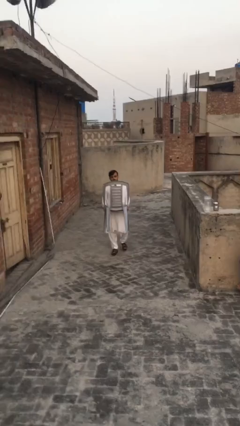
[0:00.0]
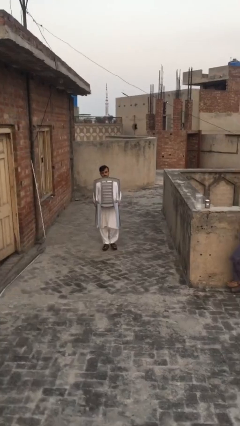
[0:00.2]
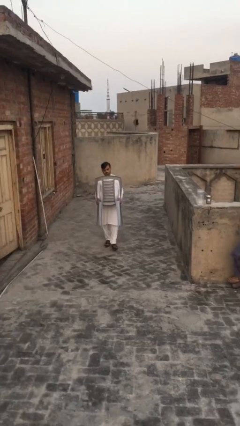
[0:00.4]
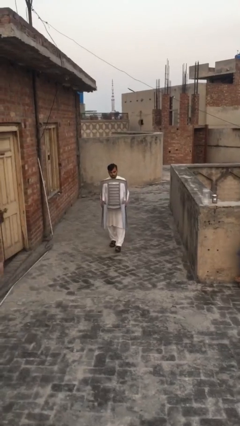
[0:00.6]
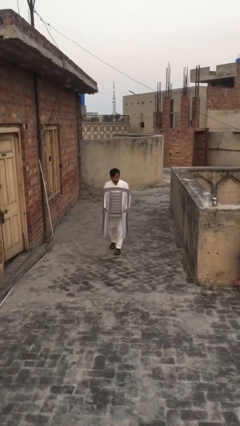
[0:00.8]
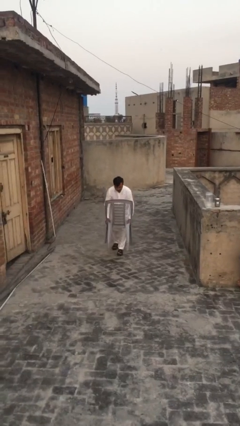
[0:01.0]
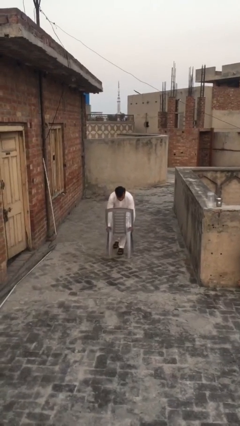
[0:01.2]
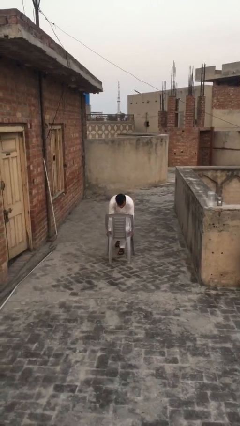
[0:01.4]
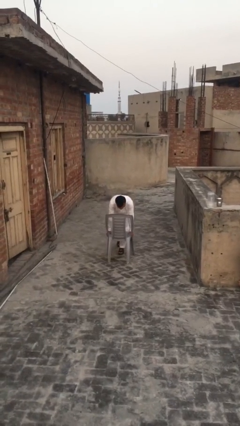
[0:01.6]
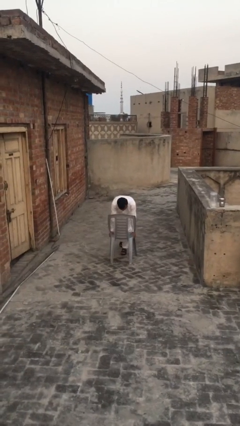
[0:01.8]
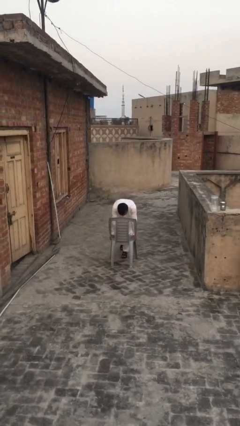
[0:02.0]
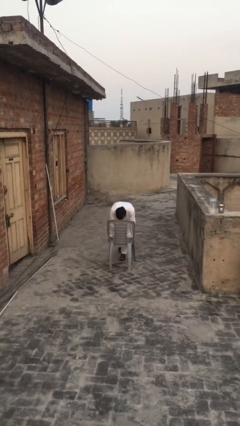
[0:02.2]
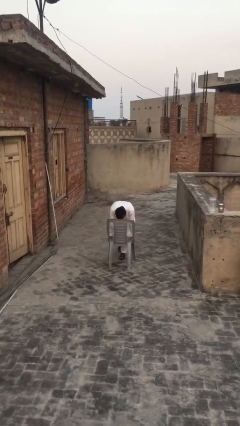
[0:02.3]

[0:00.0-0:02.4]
person puts down object on floor

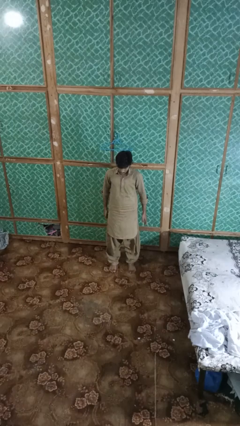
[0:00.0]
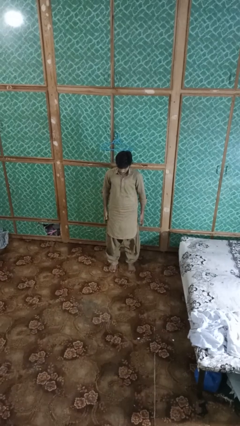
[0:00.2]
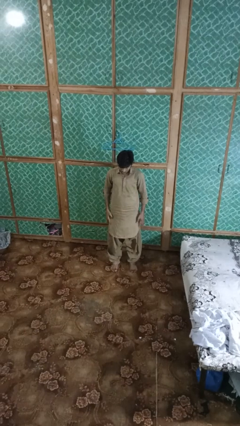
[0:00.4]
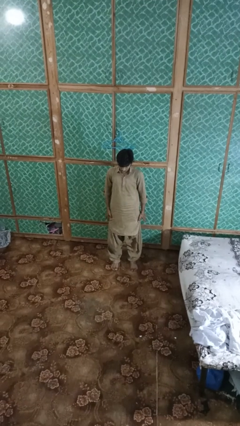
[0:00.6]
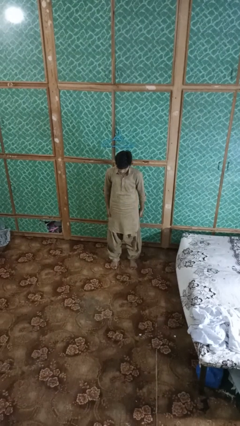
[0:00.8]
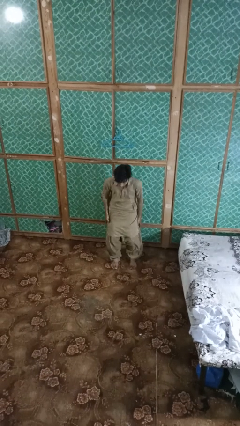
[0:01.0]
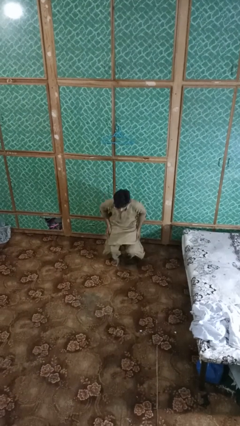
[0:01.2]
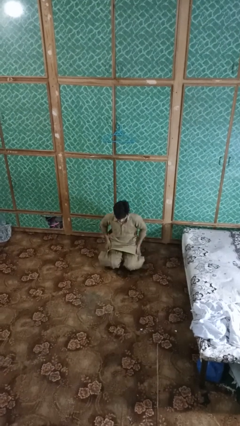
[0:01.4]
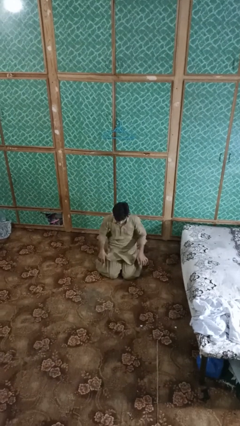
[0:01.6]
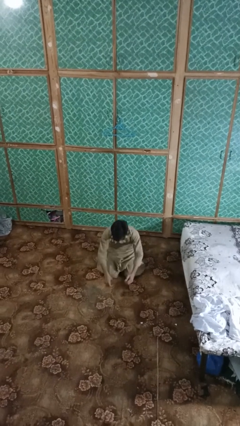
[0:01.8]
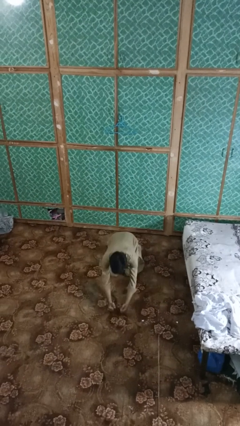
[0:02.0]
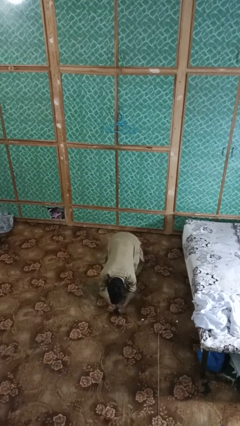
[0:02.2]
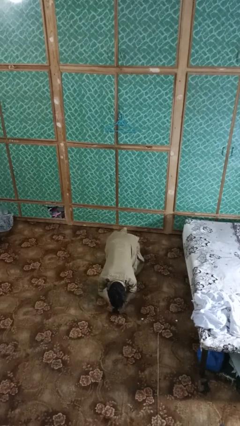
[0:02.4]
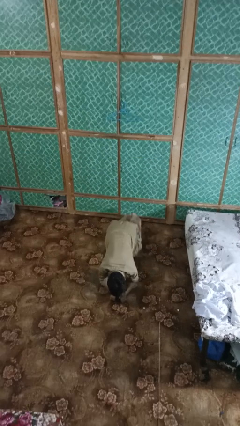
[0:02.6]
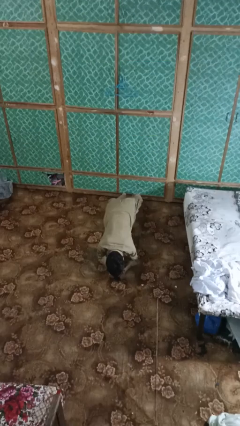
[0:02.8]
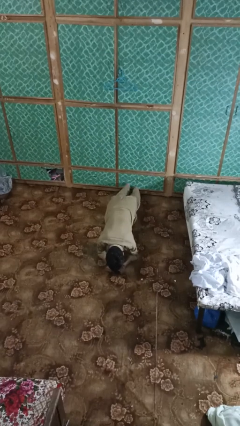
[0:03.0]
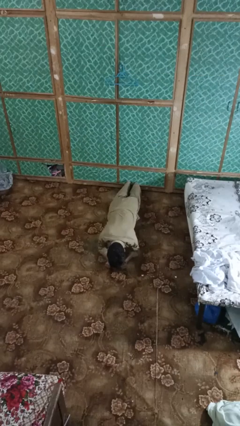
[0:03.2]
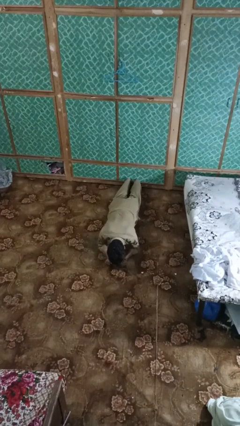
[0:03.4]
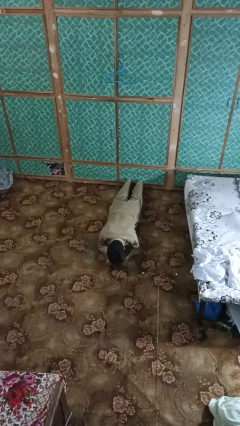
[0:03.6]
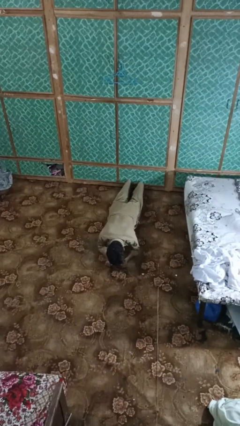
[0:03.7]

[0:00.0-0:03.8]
person exercises with plank

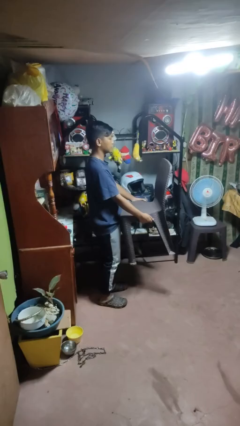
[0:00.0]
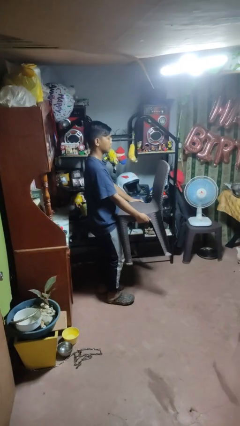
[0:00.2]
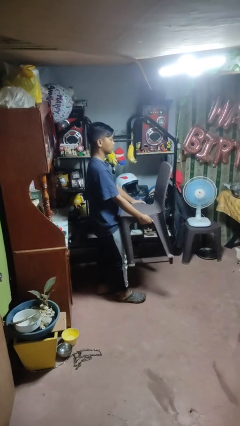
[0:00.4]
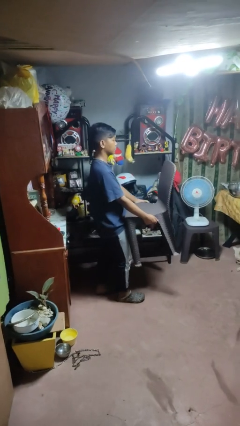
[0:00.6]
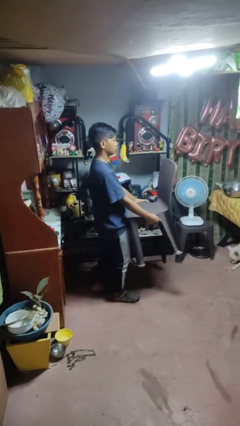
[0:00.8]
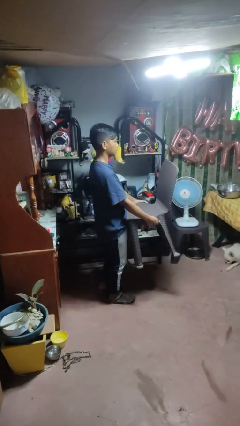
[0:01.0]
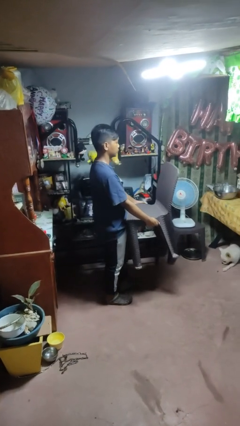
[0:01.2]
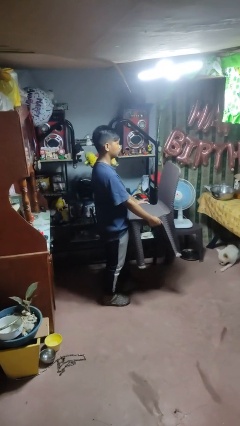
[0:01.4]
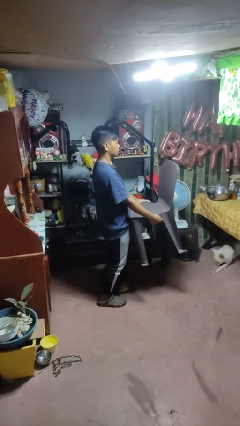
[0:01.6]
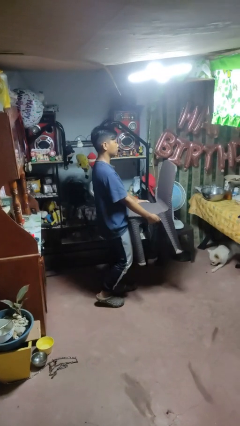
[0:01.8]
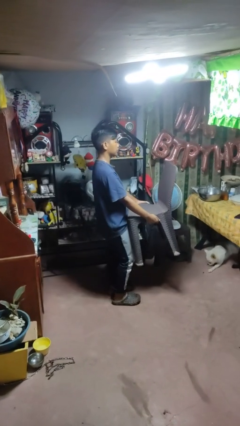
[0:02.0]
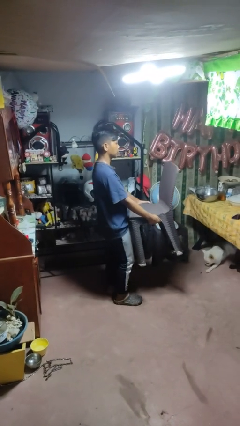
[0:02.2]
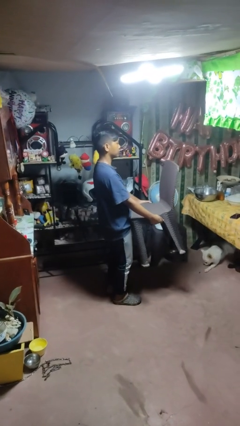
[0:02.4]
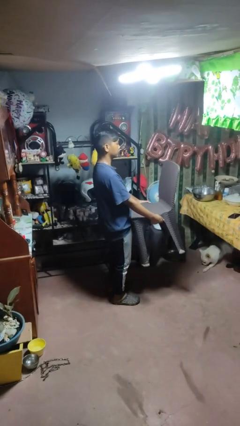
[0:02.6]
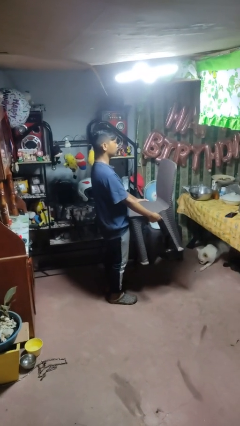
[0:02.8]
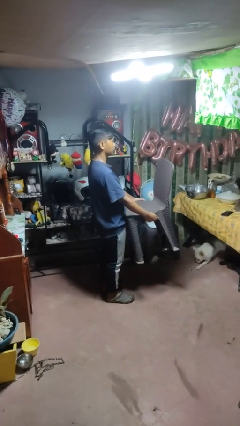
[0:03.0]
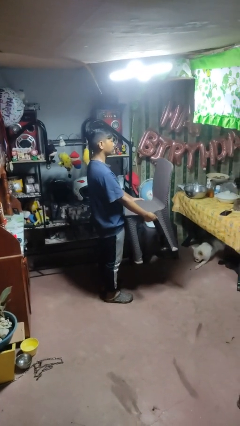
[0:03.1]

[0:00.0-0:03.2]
person carries furniture

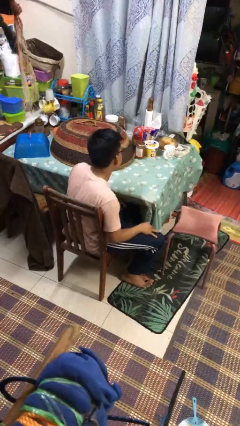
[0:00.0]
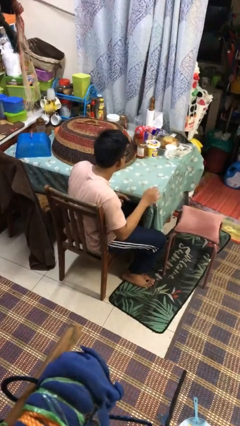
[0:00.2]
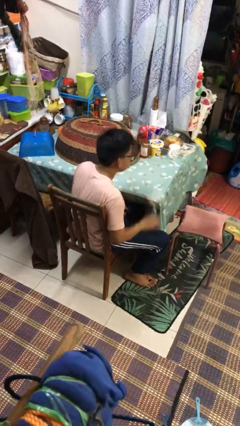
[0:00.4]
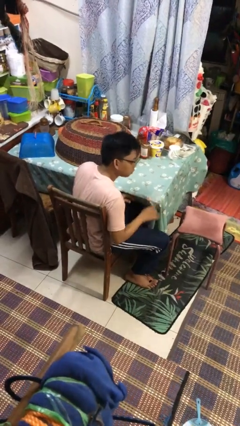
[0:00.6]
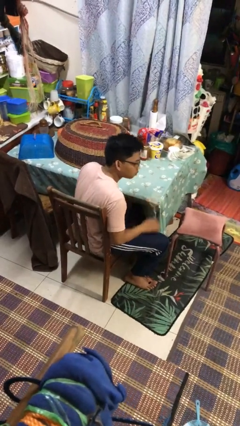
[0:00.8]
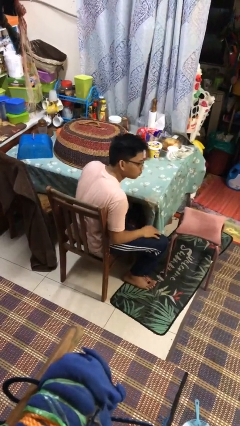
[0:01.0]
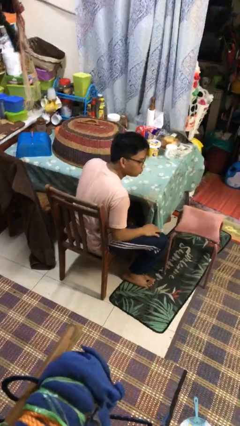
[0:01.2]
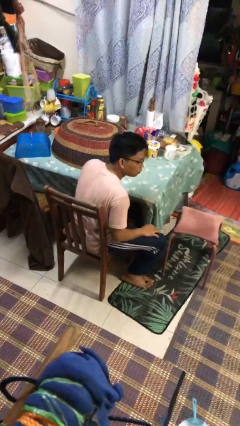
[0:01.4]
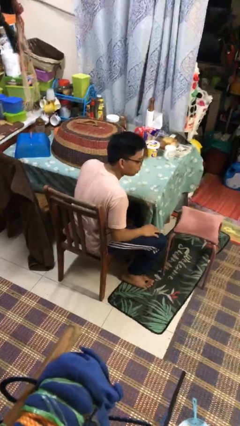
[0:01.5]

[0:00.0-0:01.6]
person slaps hands on thighs

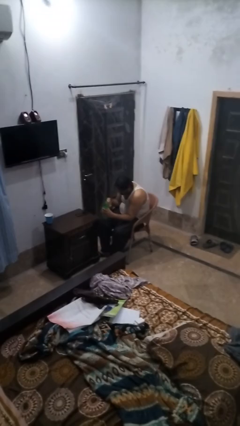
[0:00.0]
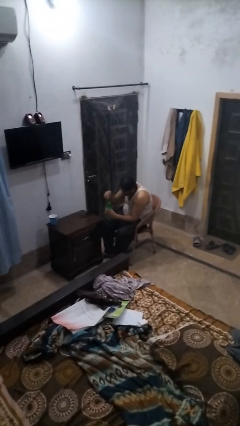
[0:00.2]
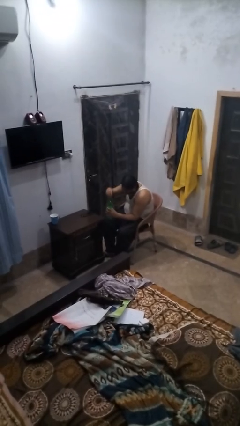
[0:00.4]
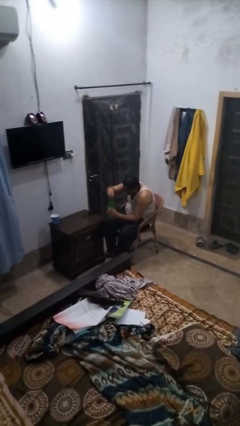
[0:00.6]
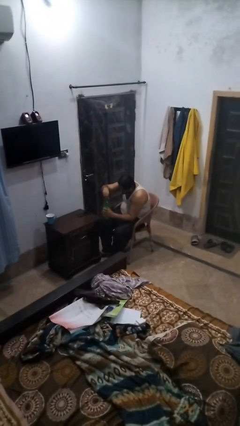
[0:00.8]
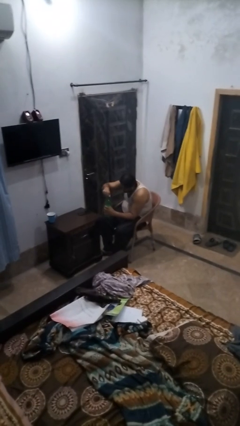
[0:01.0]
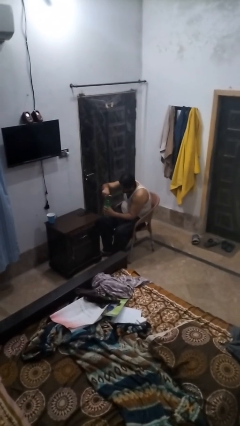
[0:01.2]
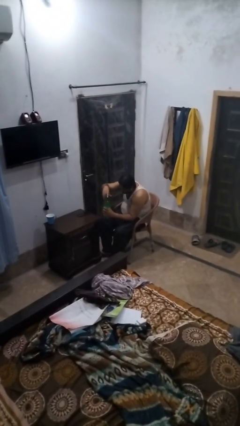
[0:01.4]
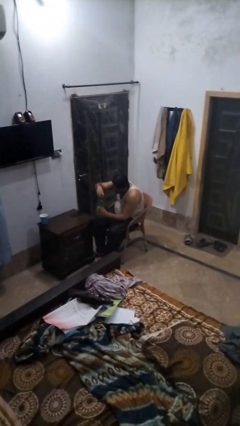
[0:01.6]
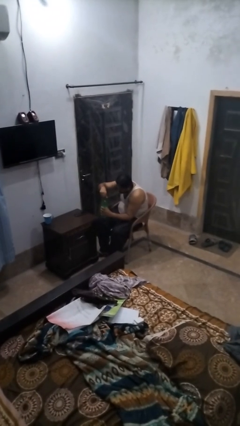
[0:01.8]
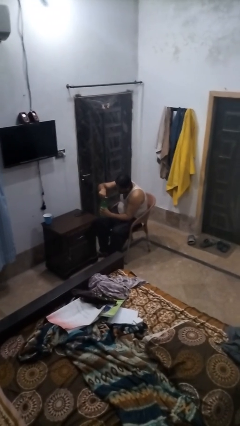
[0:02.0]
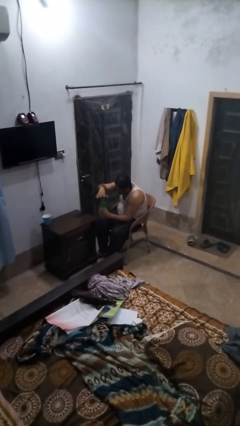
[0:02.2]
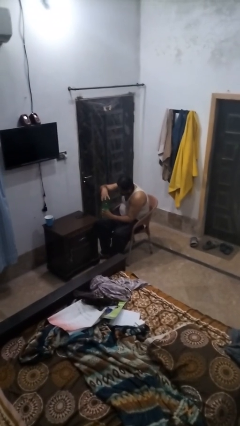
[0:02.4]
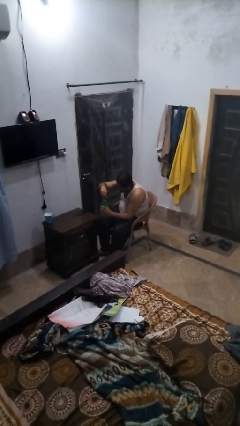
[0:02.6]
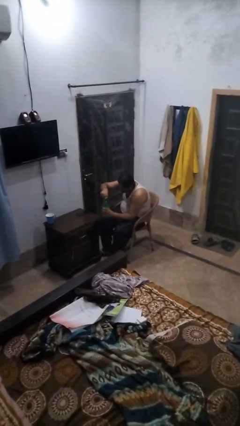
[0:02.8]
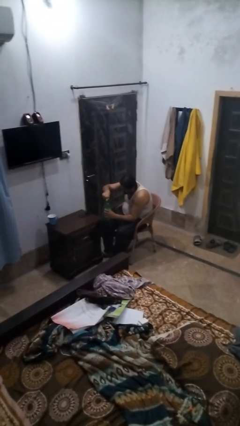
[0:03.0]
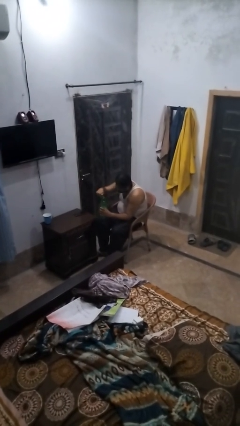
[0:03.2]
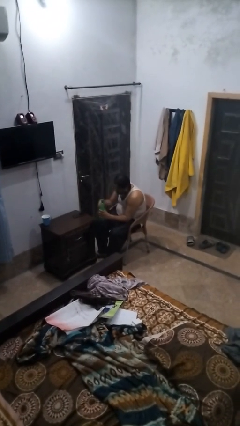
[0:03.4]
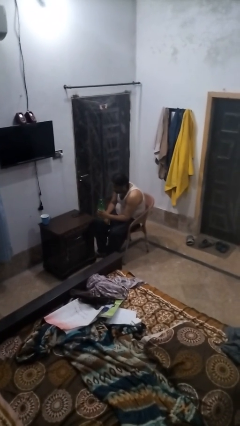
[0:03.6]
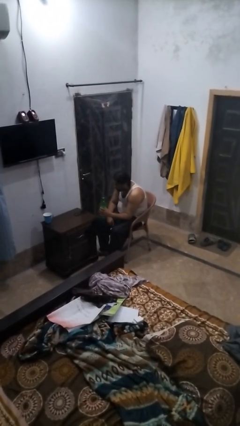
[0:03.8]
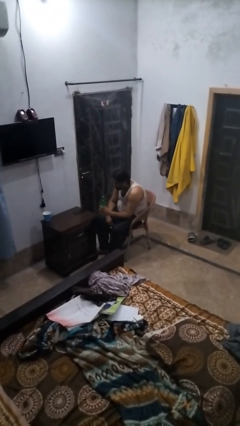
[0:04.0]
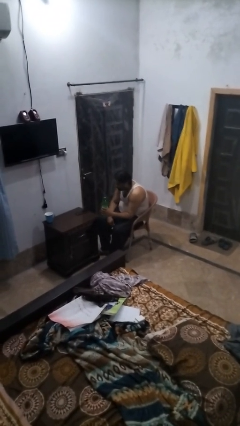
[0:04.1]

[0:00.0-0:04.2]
person screws lid to bottle

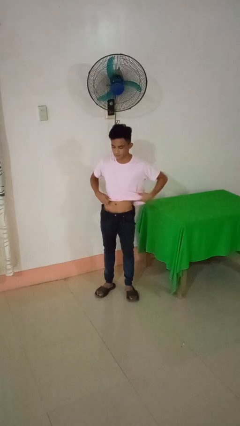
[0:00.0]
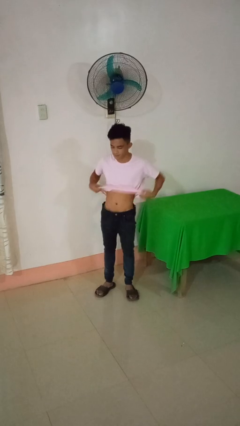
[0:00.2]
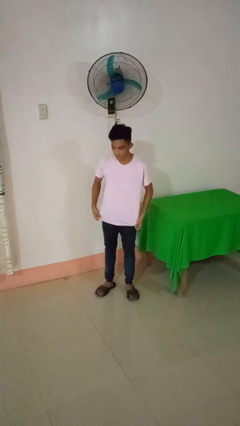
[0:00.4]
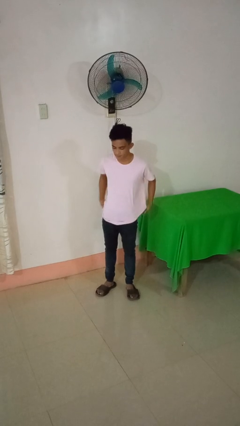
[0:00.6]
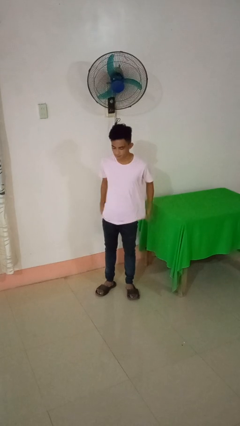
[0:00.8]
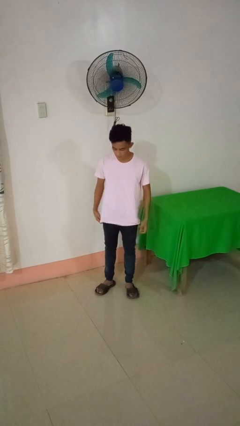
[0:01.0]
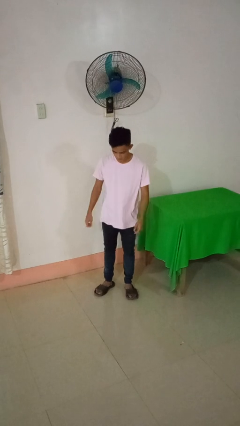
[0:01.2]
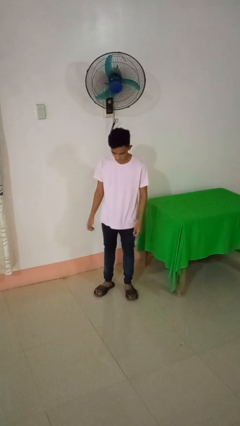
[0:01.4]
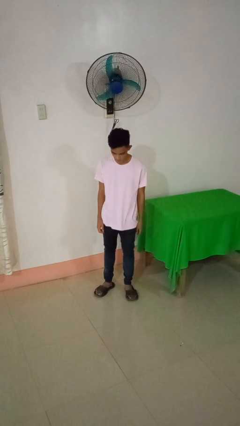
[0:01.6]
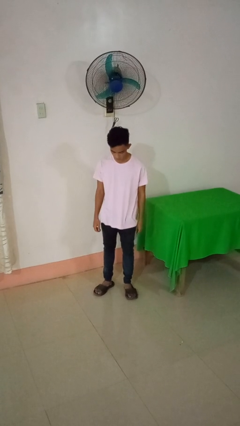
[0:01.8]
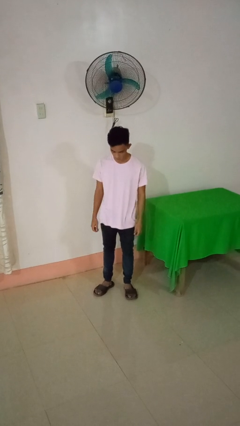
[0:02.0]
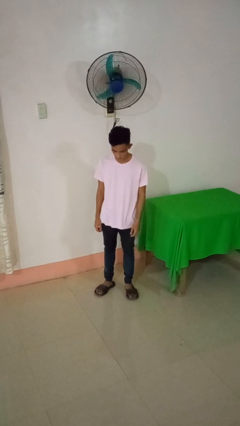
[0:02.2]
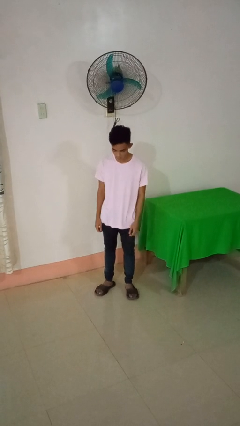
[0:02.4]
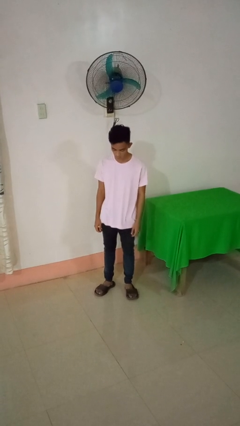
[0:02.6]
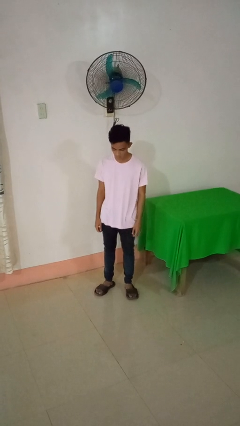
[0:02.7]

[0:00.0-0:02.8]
person untucks shirt
